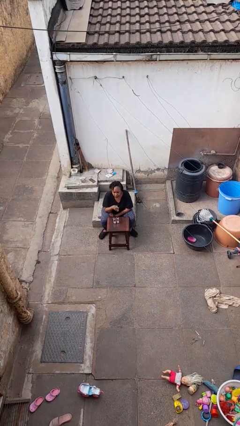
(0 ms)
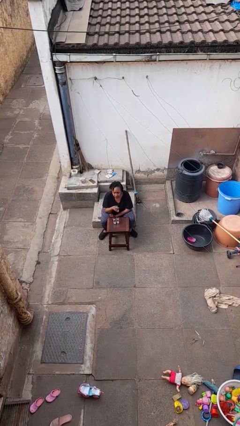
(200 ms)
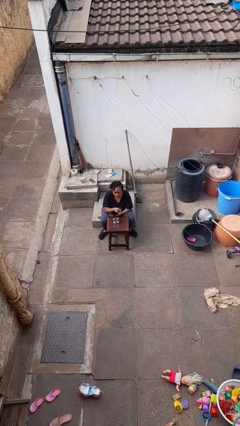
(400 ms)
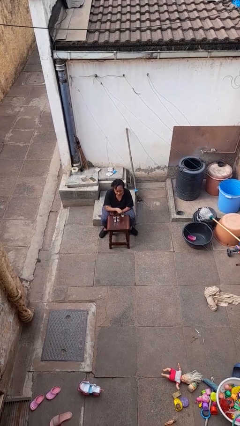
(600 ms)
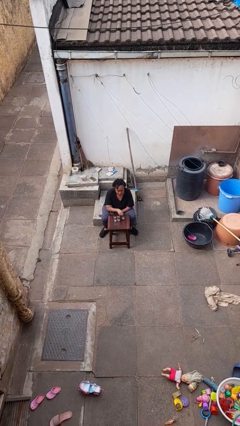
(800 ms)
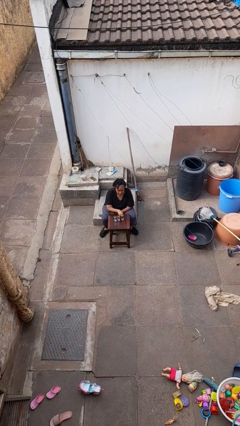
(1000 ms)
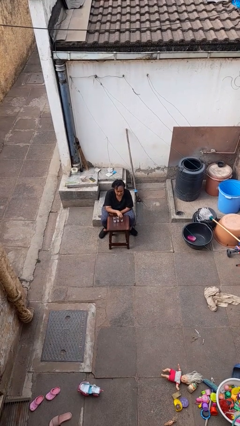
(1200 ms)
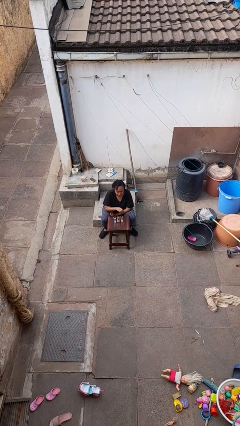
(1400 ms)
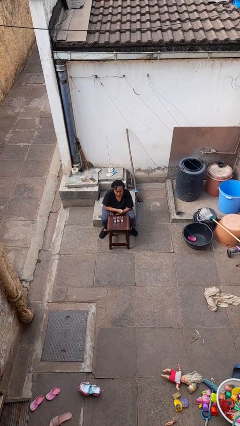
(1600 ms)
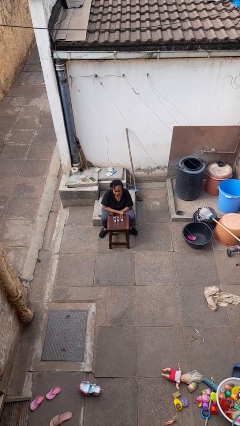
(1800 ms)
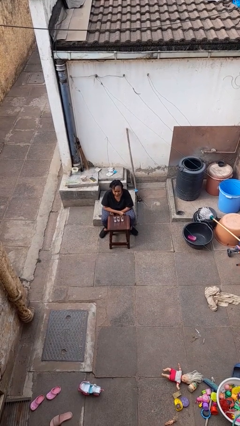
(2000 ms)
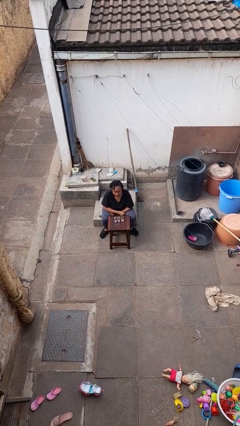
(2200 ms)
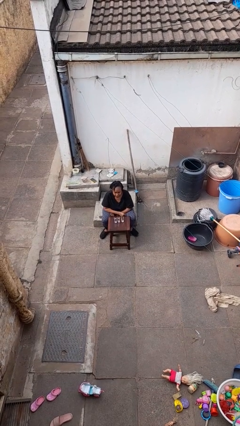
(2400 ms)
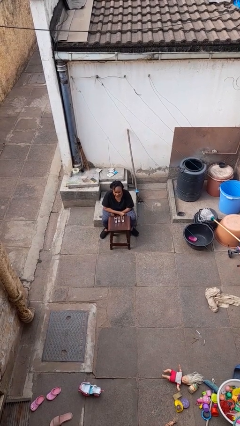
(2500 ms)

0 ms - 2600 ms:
person puts down object on table

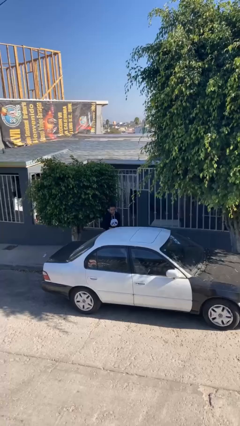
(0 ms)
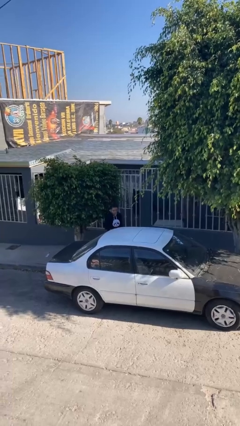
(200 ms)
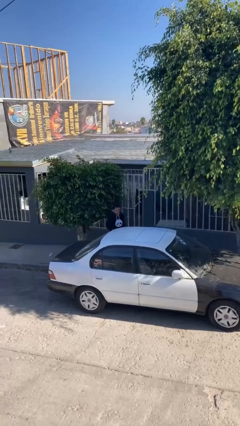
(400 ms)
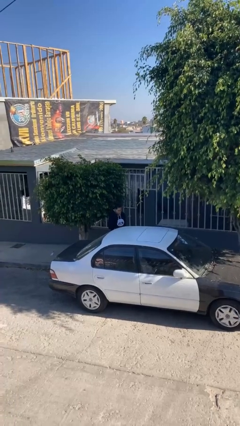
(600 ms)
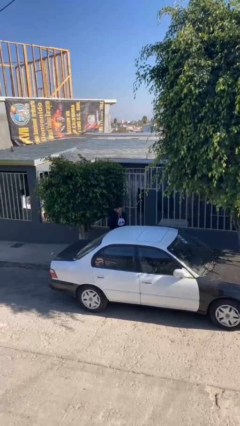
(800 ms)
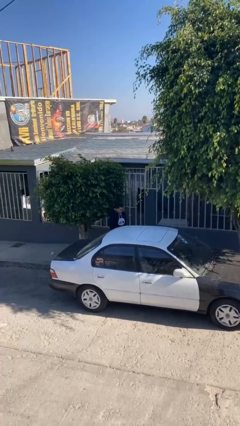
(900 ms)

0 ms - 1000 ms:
person closes car door

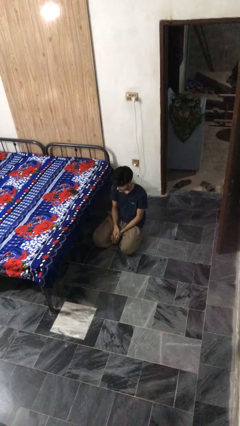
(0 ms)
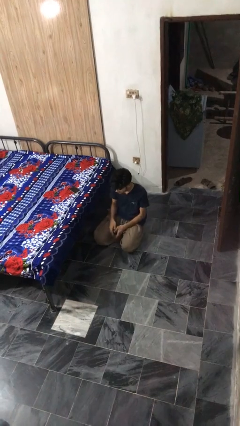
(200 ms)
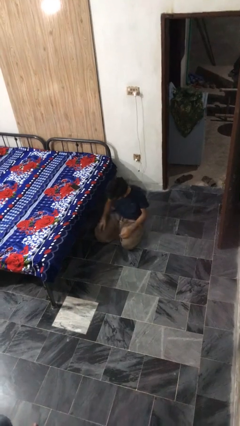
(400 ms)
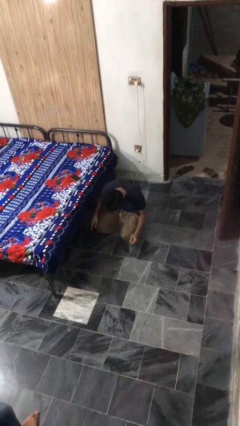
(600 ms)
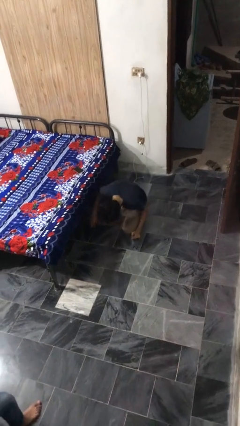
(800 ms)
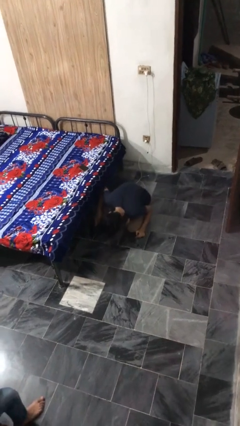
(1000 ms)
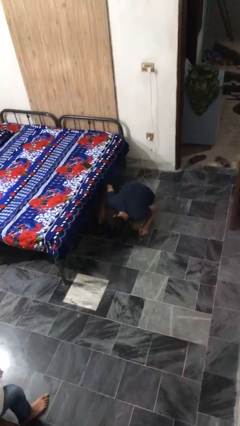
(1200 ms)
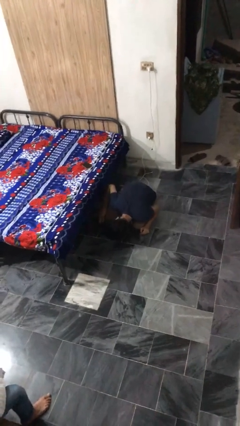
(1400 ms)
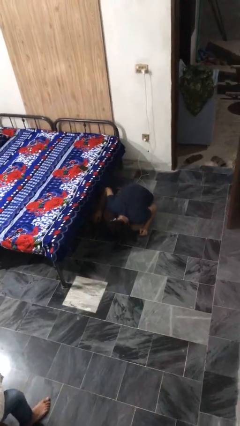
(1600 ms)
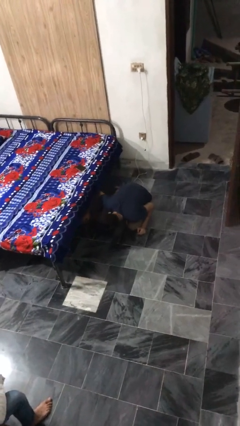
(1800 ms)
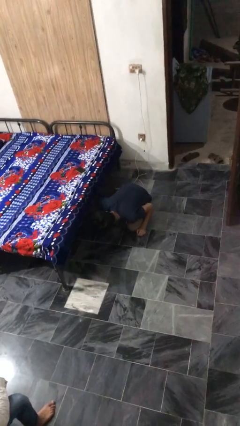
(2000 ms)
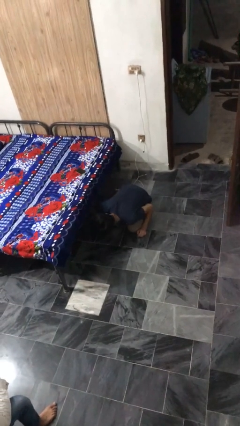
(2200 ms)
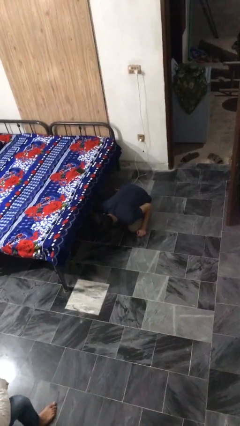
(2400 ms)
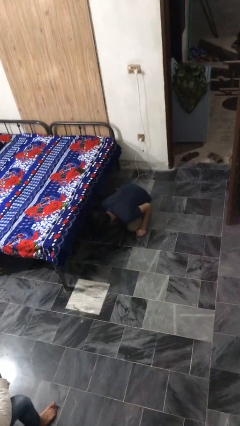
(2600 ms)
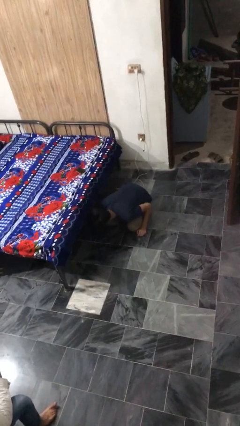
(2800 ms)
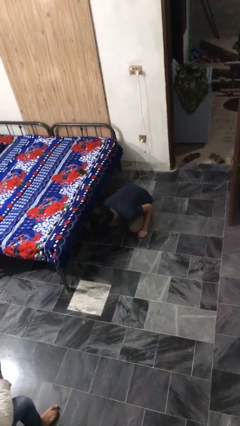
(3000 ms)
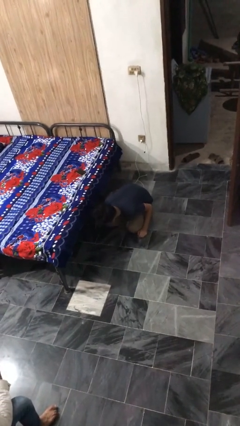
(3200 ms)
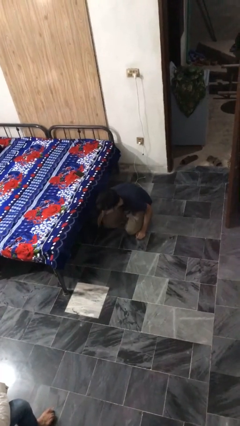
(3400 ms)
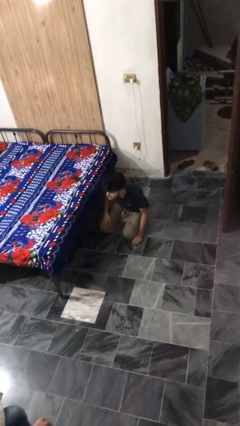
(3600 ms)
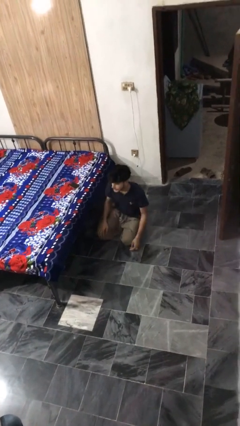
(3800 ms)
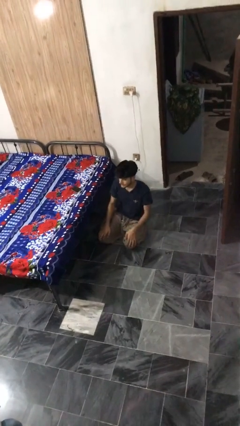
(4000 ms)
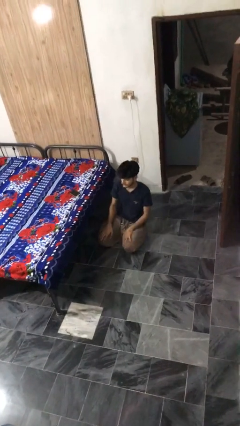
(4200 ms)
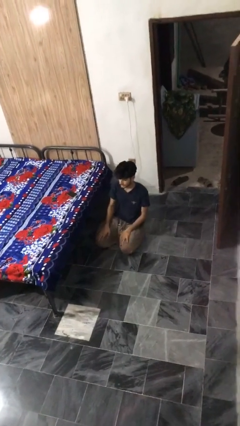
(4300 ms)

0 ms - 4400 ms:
person searches under bed

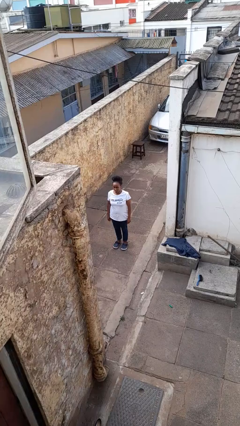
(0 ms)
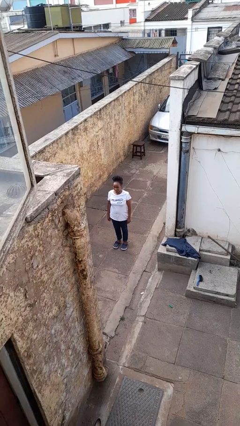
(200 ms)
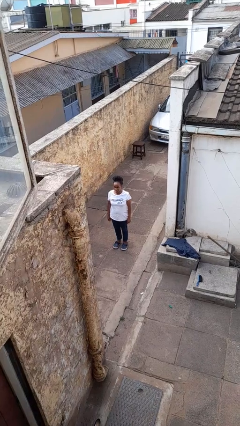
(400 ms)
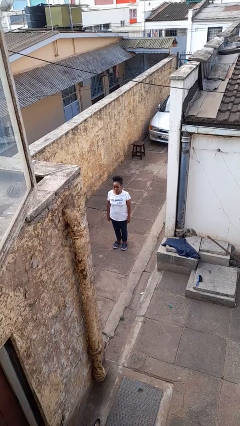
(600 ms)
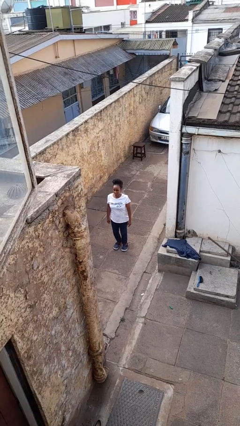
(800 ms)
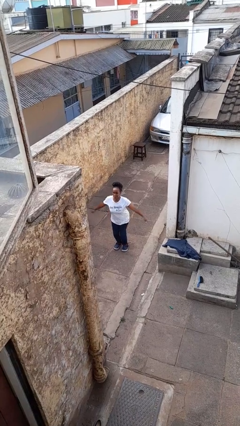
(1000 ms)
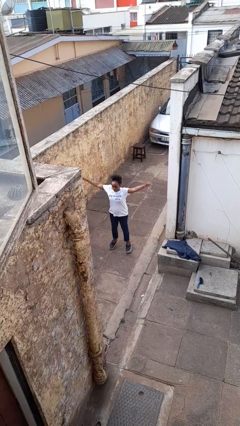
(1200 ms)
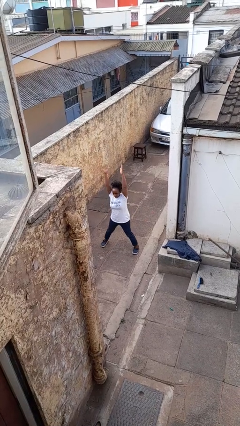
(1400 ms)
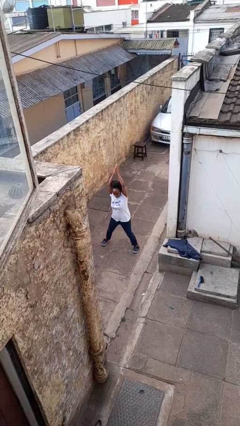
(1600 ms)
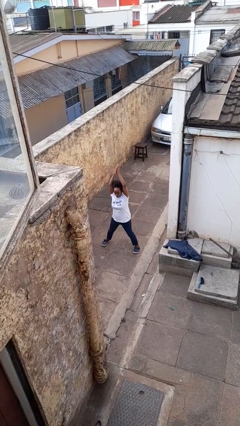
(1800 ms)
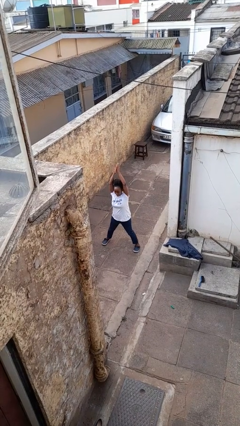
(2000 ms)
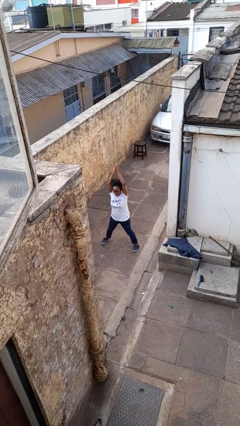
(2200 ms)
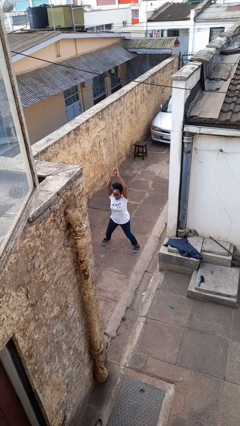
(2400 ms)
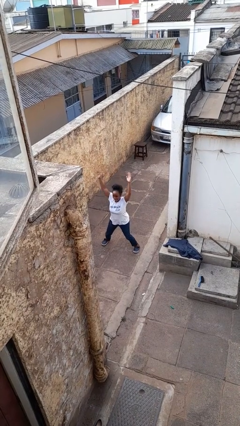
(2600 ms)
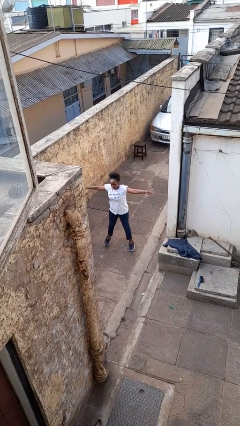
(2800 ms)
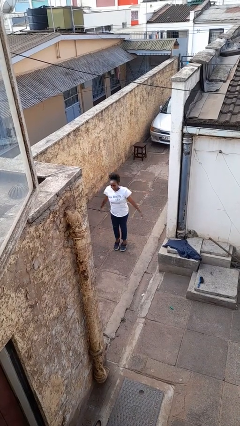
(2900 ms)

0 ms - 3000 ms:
person exercises with jumping jacks

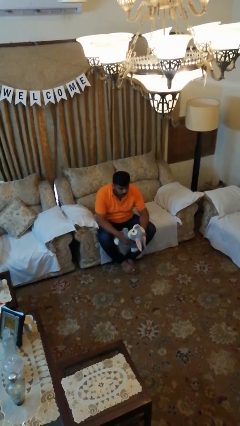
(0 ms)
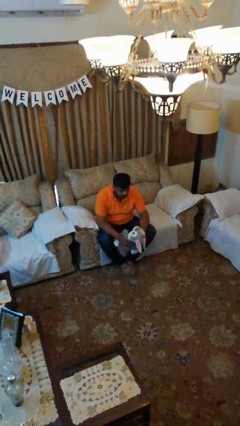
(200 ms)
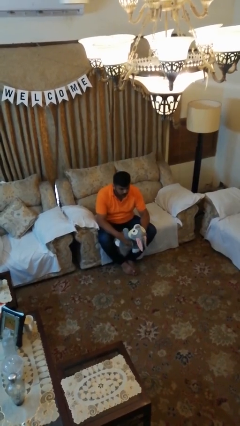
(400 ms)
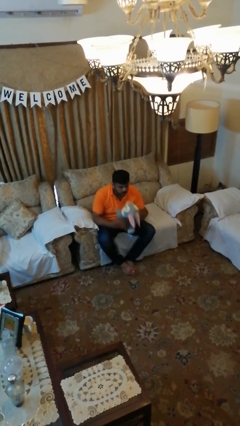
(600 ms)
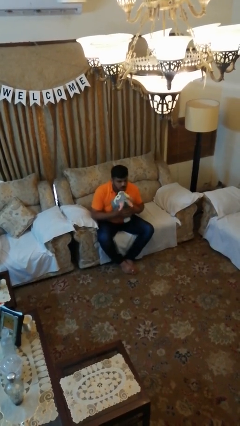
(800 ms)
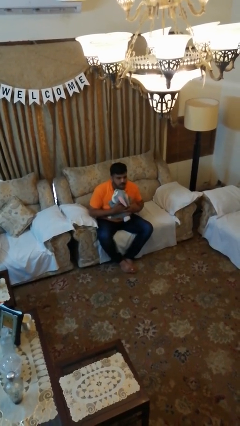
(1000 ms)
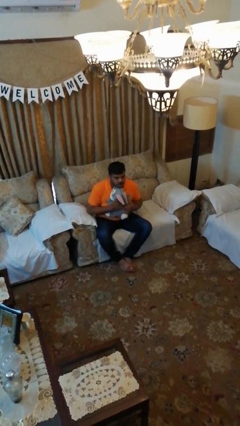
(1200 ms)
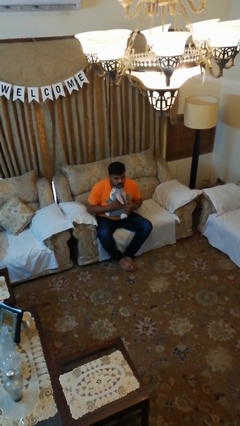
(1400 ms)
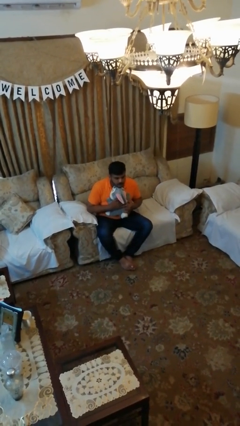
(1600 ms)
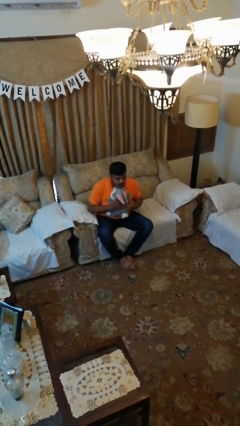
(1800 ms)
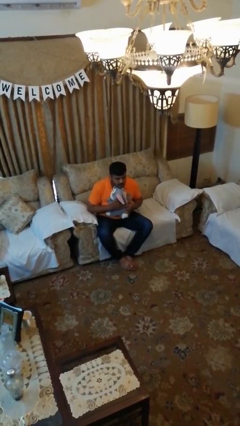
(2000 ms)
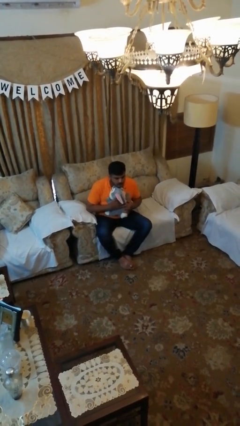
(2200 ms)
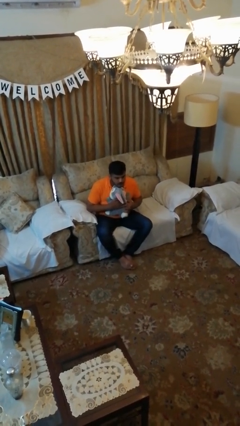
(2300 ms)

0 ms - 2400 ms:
person hugs stuffed animal

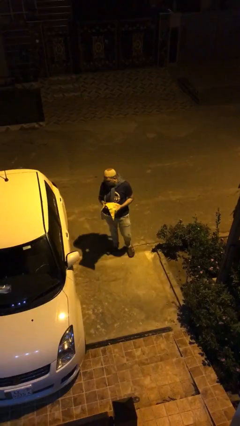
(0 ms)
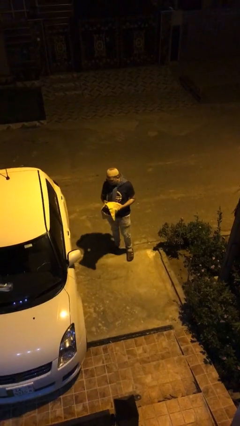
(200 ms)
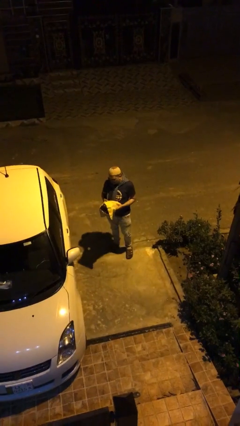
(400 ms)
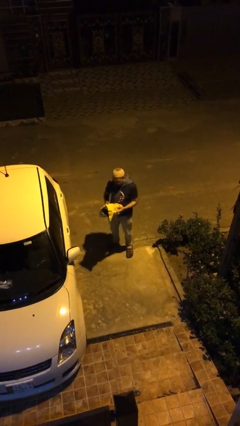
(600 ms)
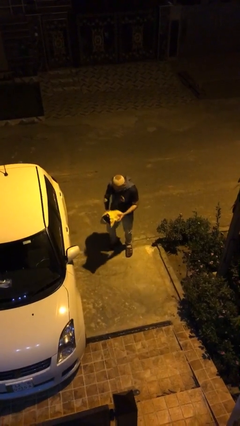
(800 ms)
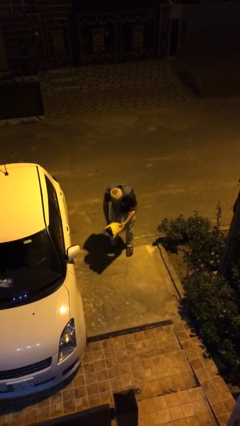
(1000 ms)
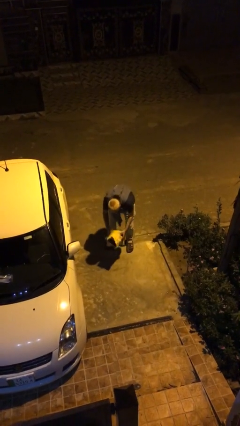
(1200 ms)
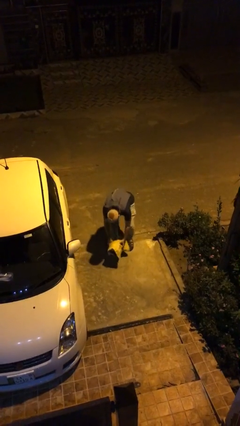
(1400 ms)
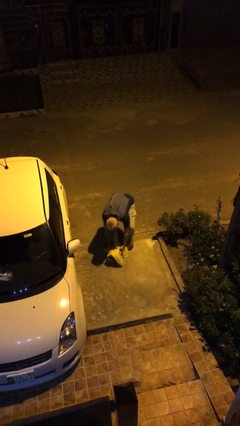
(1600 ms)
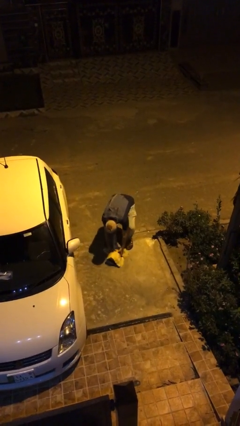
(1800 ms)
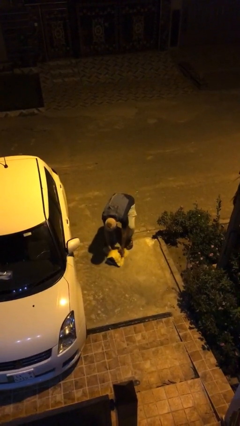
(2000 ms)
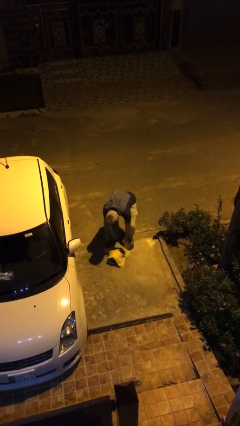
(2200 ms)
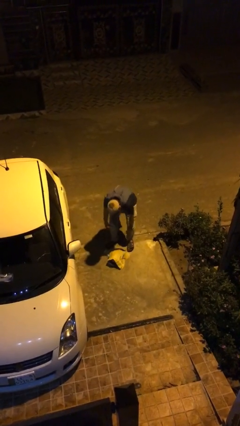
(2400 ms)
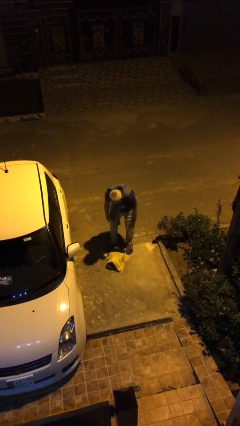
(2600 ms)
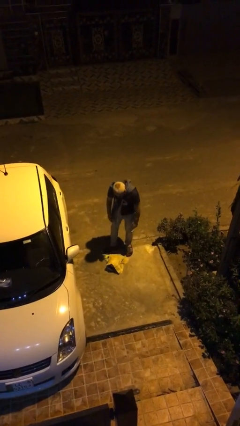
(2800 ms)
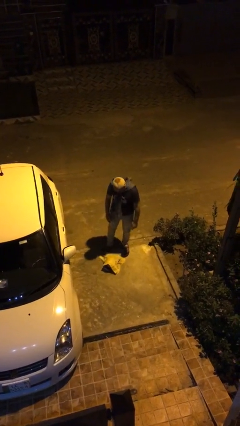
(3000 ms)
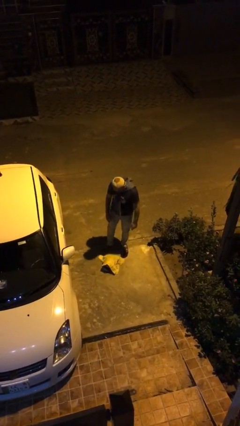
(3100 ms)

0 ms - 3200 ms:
person puts down object on floor

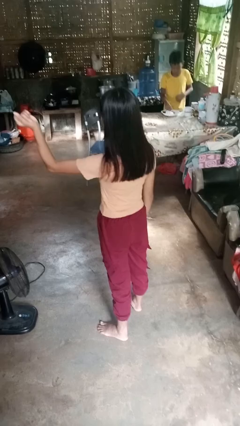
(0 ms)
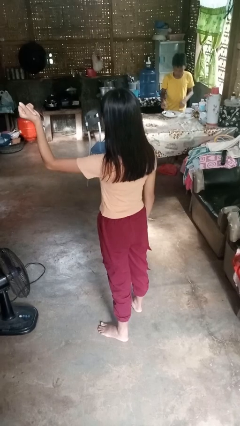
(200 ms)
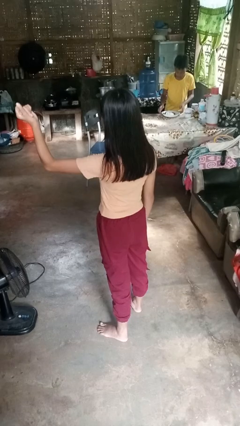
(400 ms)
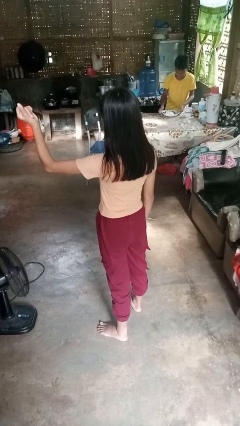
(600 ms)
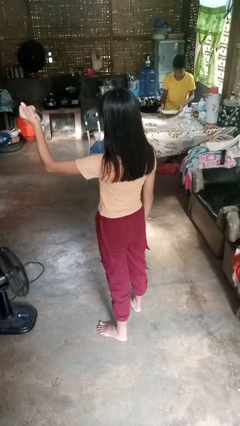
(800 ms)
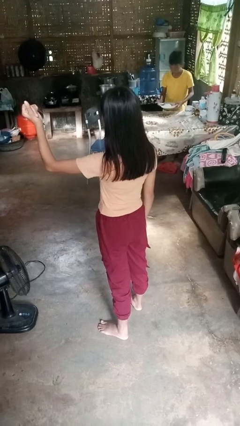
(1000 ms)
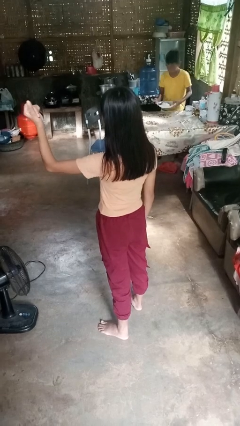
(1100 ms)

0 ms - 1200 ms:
person snaps fingers
